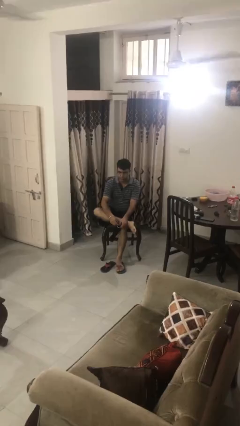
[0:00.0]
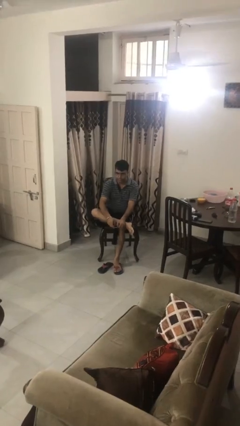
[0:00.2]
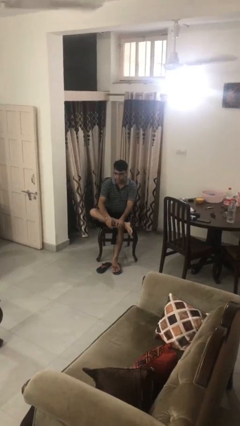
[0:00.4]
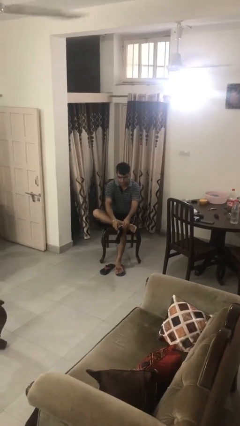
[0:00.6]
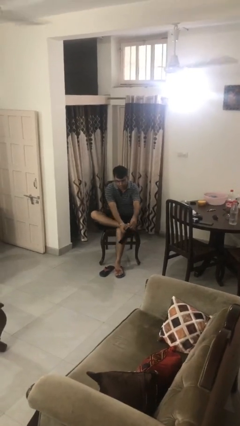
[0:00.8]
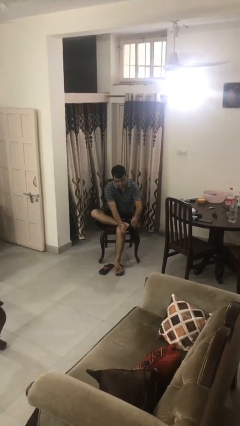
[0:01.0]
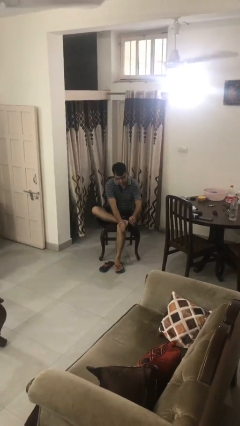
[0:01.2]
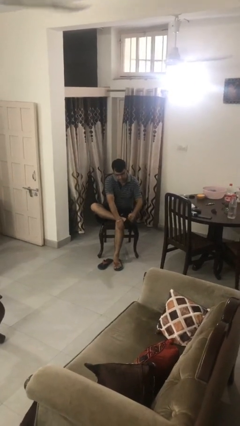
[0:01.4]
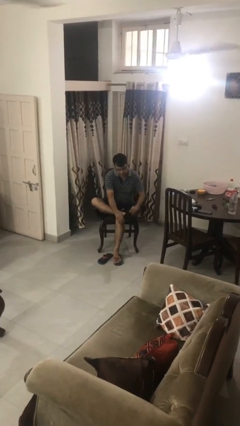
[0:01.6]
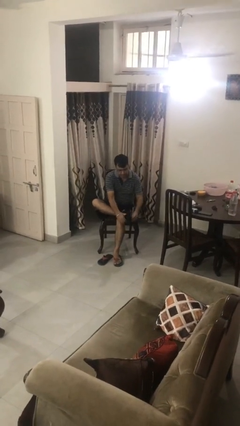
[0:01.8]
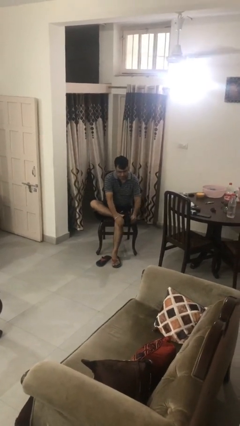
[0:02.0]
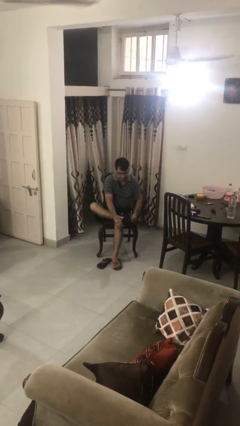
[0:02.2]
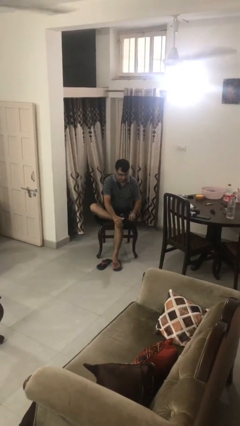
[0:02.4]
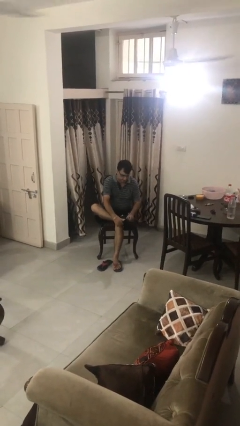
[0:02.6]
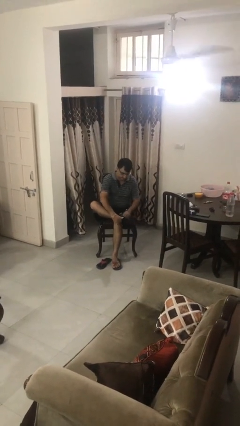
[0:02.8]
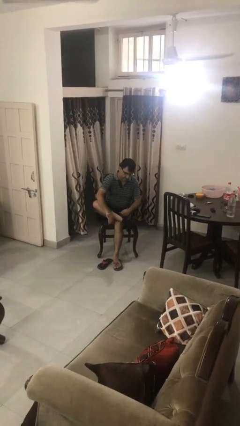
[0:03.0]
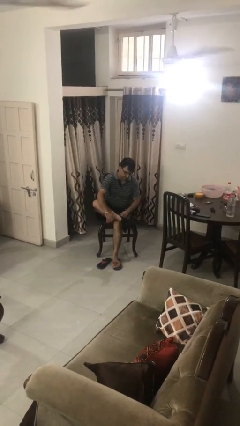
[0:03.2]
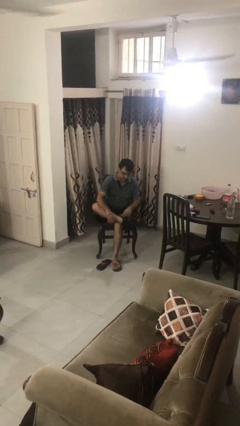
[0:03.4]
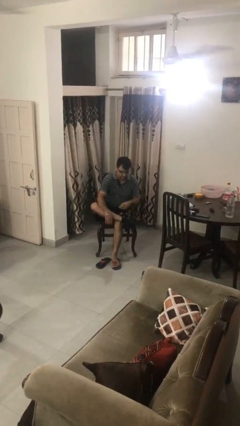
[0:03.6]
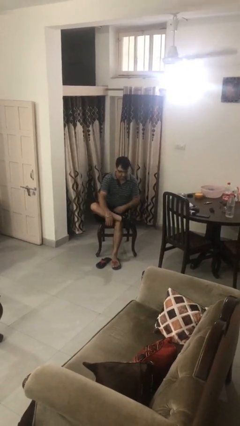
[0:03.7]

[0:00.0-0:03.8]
person puts on socks

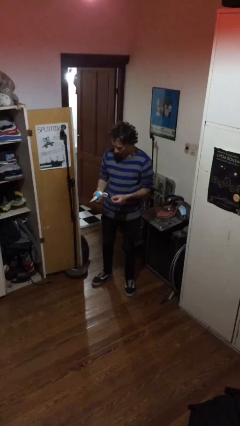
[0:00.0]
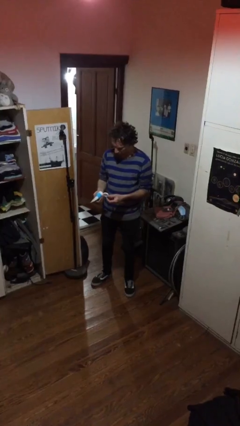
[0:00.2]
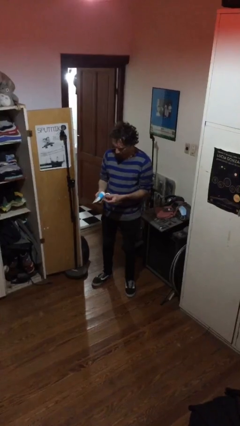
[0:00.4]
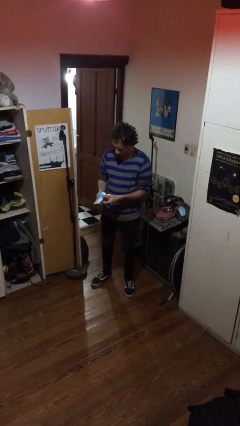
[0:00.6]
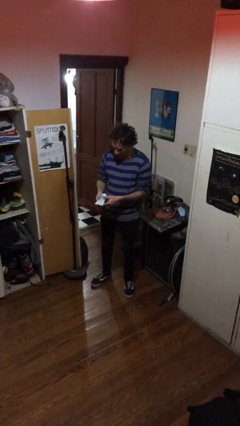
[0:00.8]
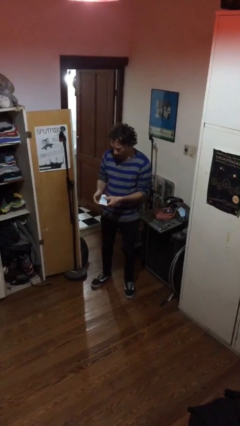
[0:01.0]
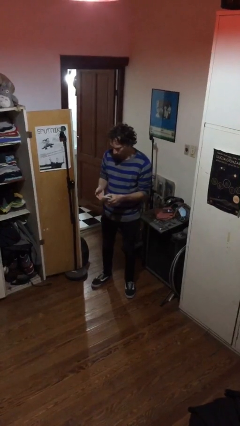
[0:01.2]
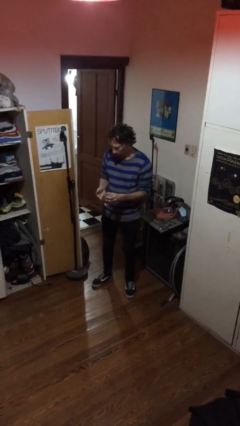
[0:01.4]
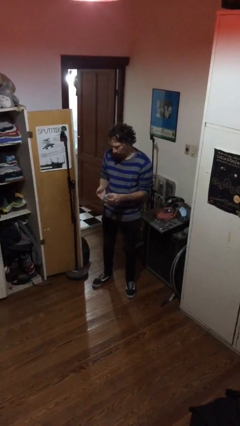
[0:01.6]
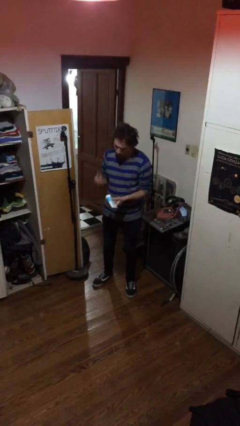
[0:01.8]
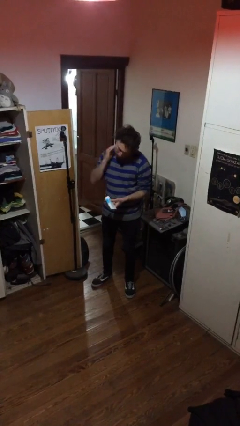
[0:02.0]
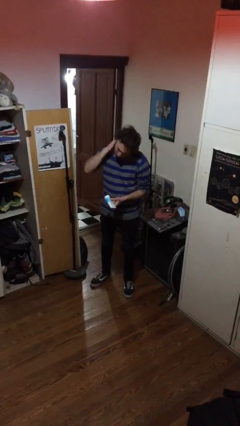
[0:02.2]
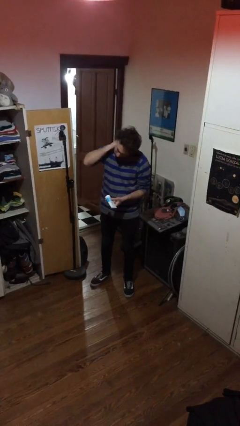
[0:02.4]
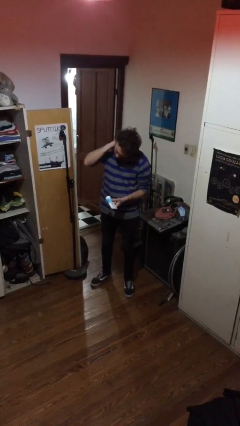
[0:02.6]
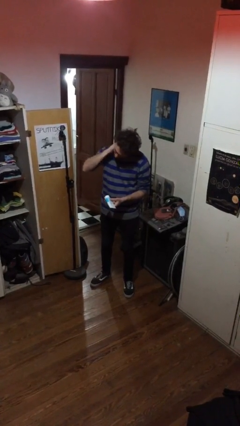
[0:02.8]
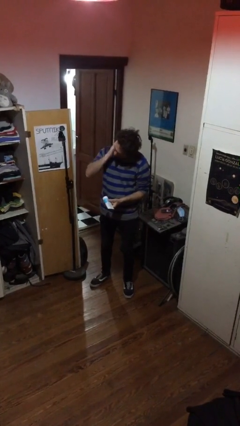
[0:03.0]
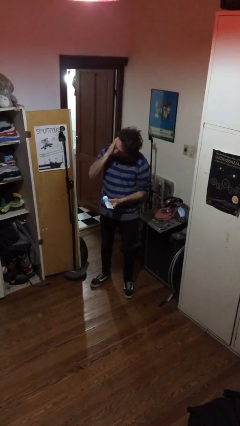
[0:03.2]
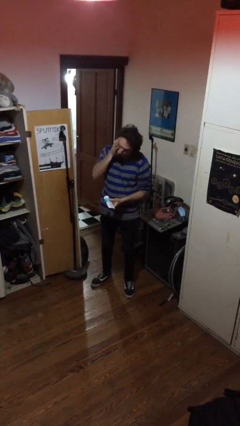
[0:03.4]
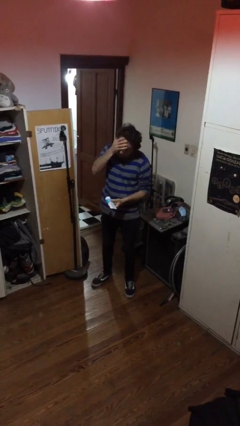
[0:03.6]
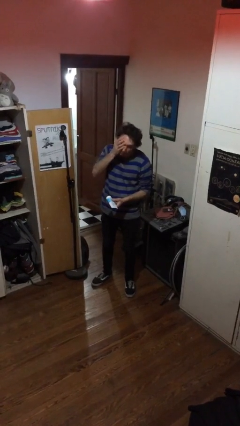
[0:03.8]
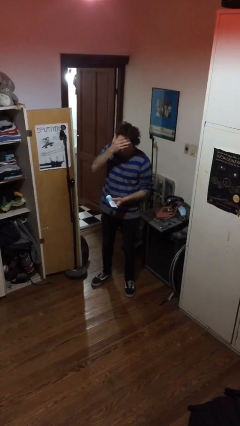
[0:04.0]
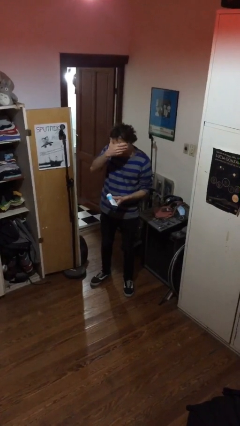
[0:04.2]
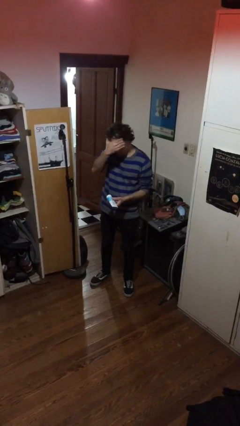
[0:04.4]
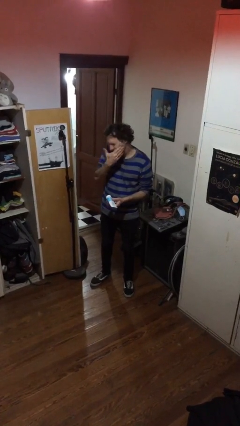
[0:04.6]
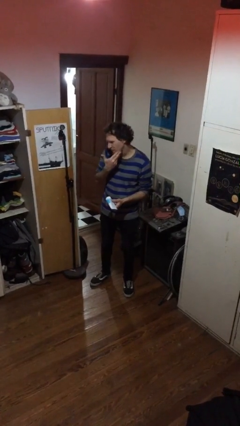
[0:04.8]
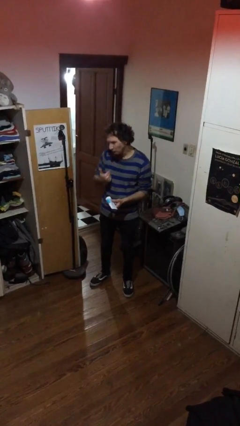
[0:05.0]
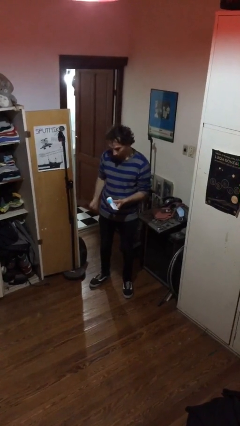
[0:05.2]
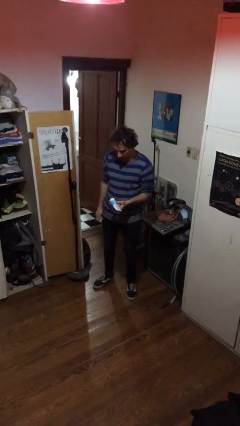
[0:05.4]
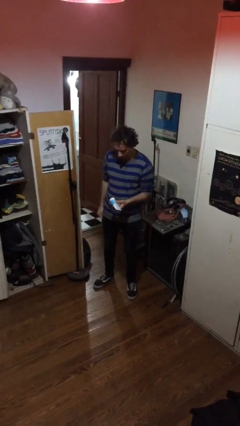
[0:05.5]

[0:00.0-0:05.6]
person applies sunscreen

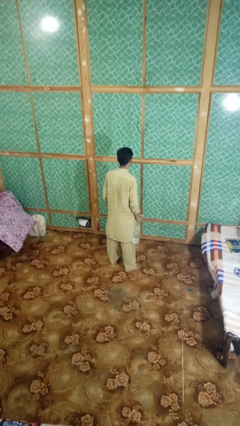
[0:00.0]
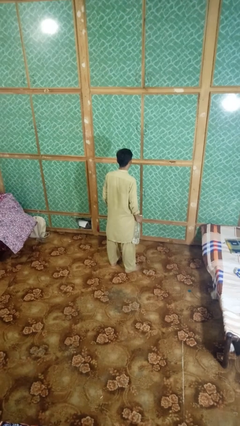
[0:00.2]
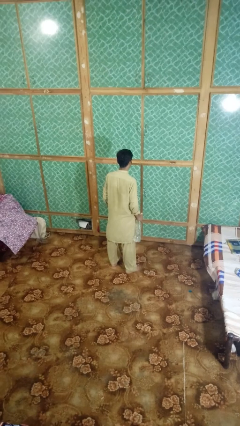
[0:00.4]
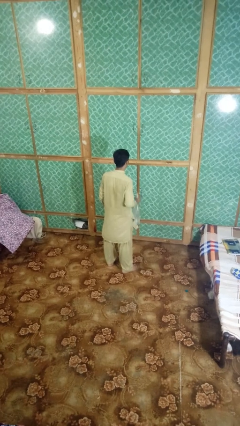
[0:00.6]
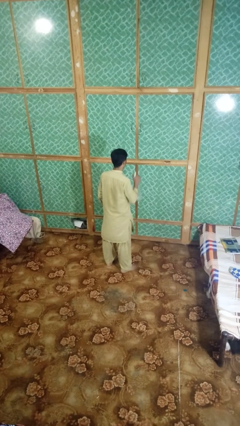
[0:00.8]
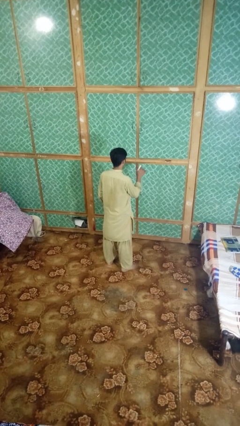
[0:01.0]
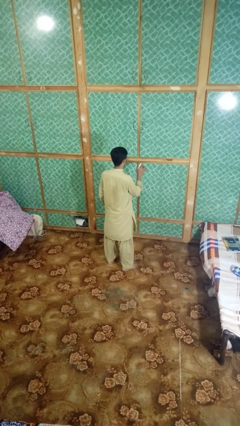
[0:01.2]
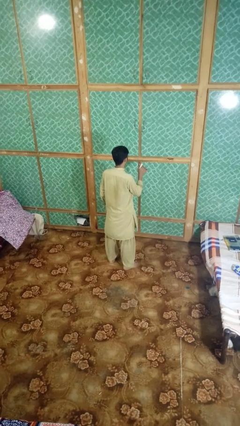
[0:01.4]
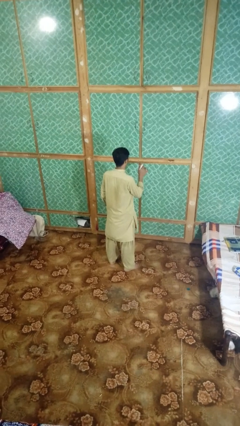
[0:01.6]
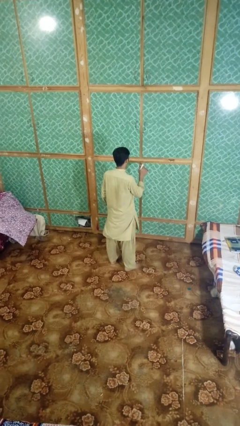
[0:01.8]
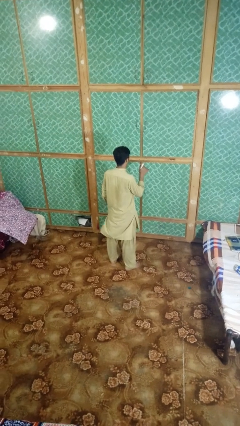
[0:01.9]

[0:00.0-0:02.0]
person sprays from bottle

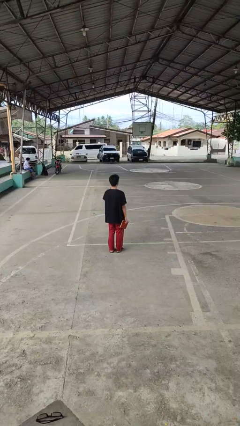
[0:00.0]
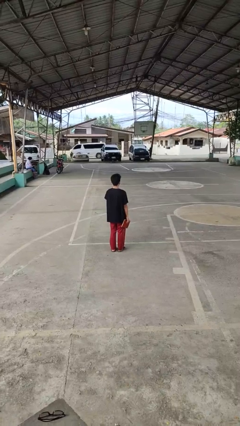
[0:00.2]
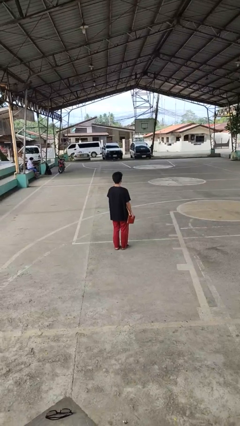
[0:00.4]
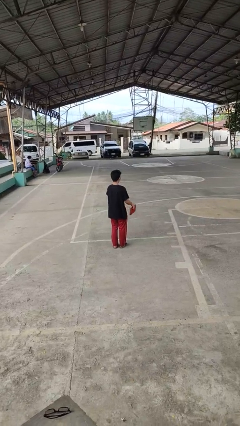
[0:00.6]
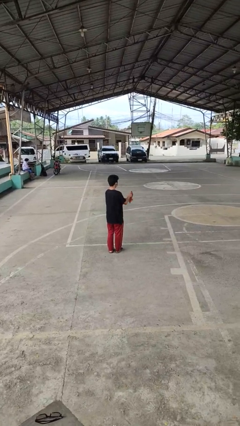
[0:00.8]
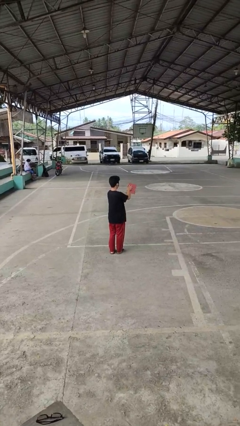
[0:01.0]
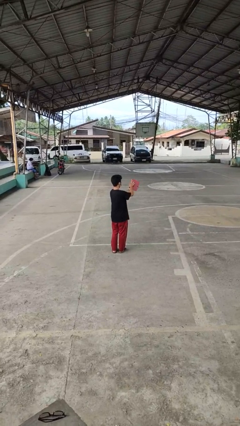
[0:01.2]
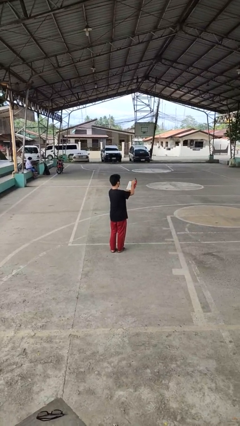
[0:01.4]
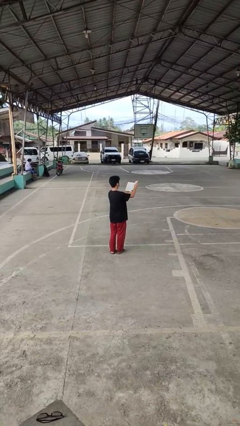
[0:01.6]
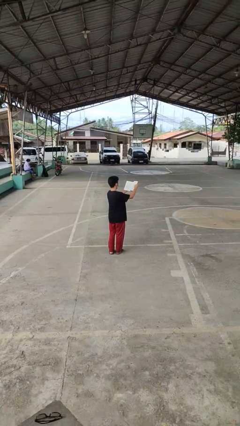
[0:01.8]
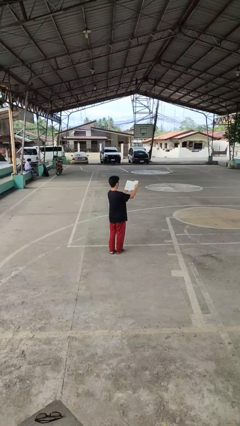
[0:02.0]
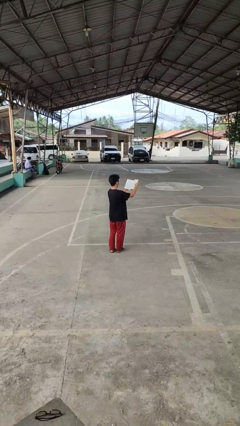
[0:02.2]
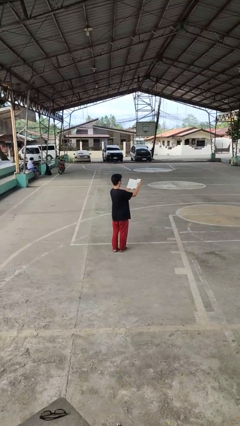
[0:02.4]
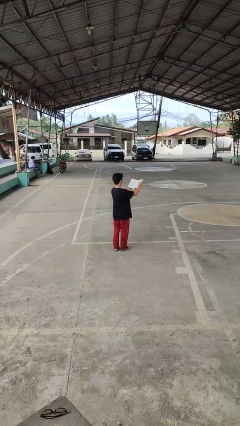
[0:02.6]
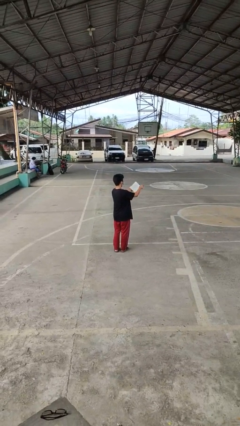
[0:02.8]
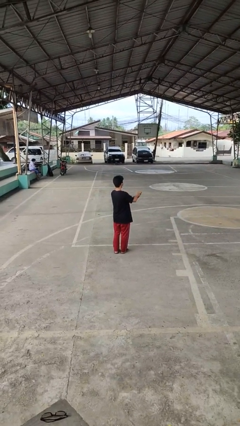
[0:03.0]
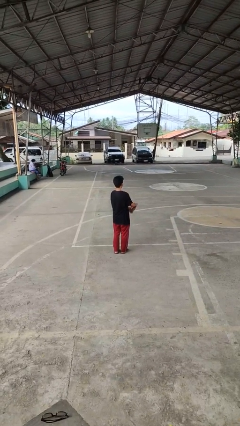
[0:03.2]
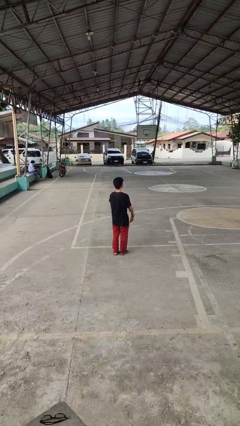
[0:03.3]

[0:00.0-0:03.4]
person reads book

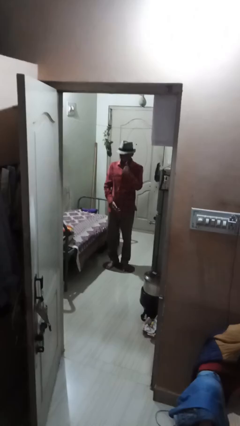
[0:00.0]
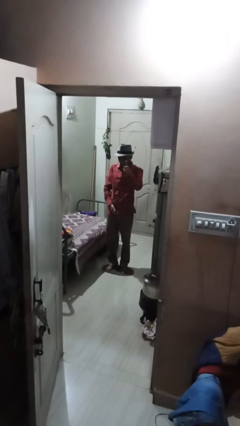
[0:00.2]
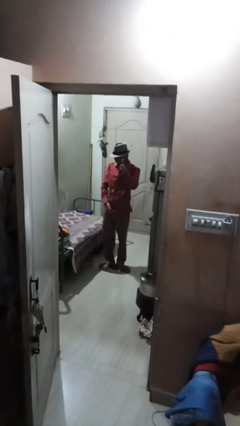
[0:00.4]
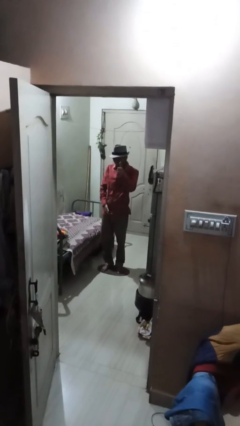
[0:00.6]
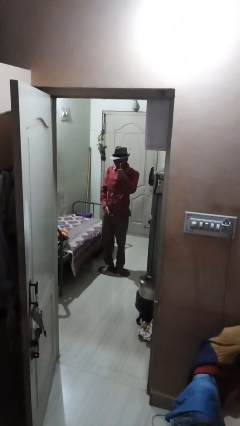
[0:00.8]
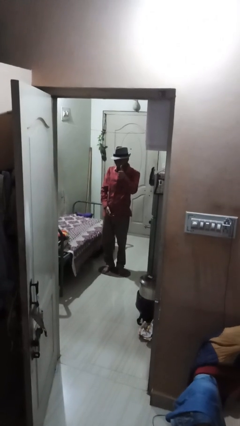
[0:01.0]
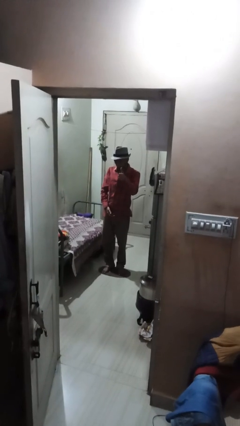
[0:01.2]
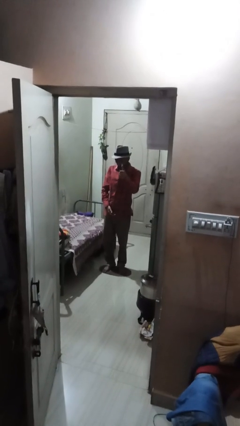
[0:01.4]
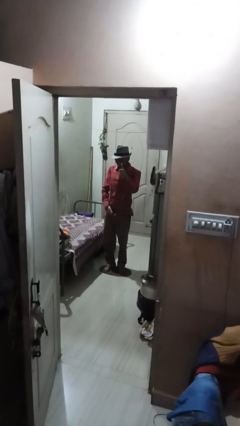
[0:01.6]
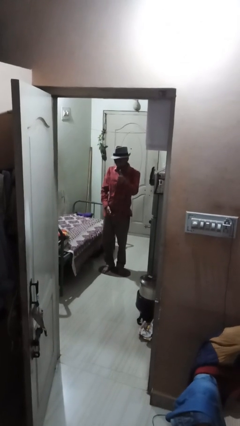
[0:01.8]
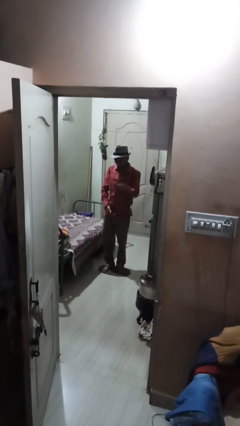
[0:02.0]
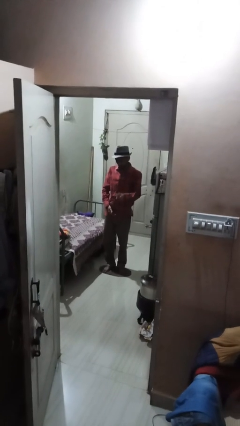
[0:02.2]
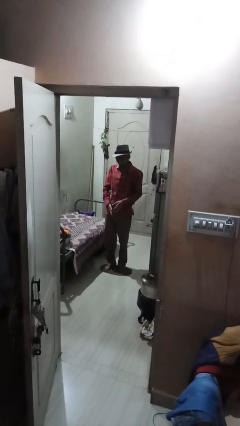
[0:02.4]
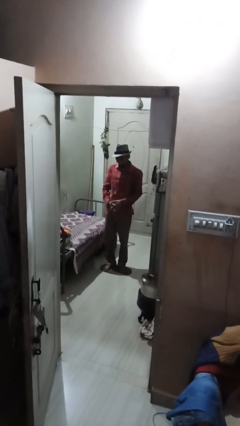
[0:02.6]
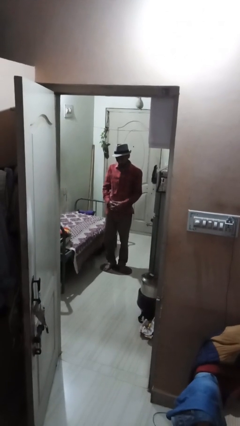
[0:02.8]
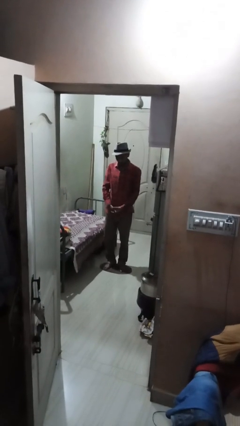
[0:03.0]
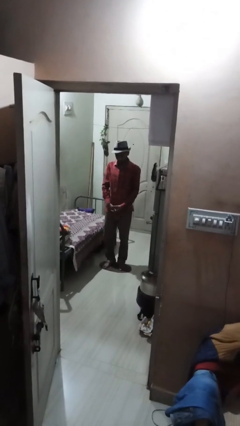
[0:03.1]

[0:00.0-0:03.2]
person gestures thumbs up
